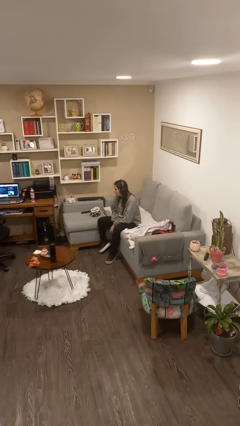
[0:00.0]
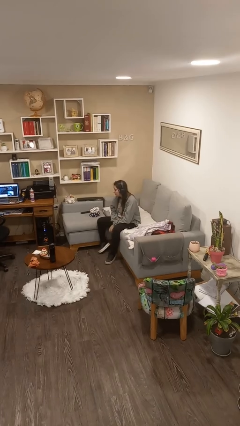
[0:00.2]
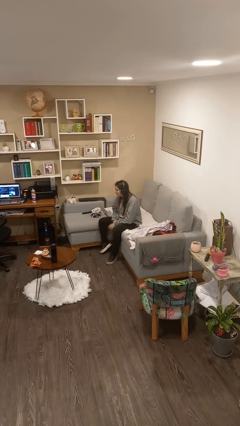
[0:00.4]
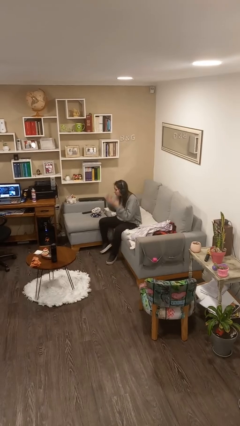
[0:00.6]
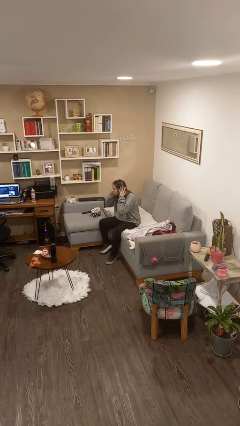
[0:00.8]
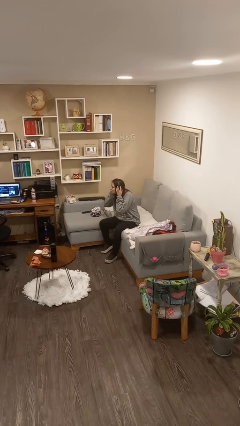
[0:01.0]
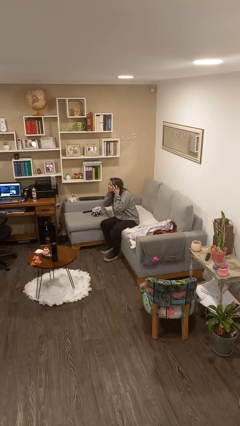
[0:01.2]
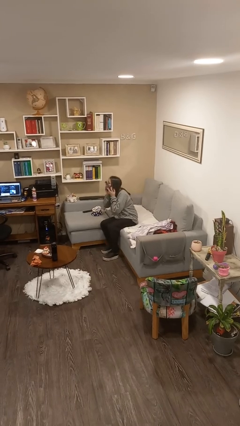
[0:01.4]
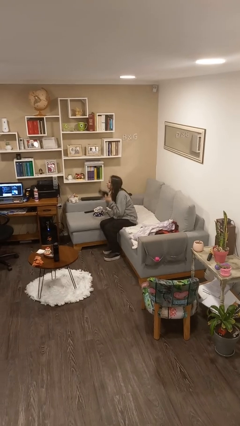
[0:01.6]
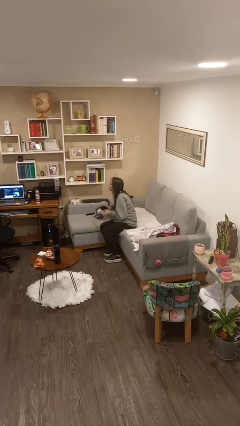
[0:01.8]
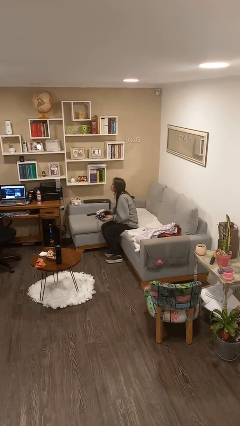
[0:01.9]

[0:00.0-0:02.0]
person takes off headphones

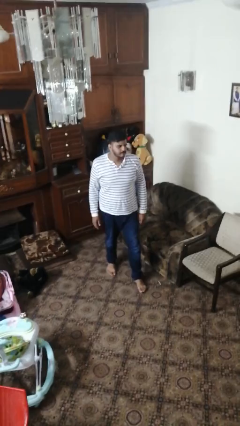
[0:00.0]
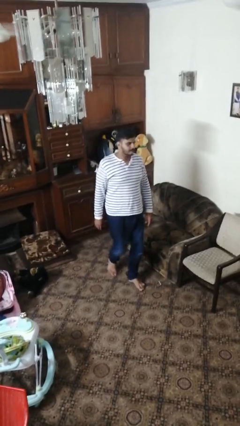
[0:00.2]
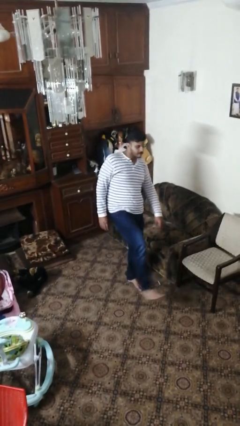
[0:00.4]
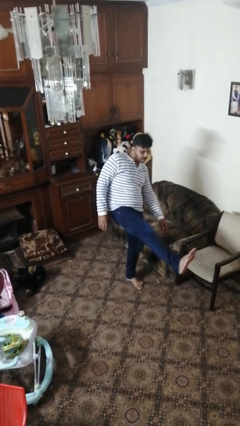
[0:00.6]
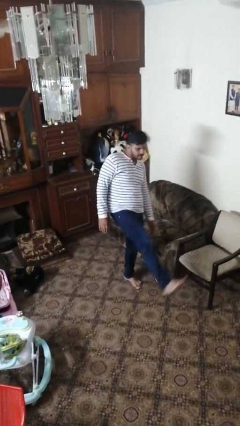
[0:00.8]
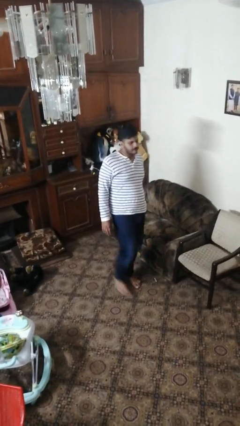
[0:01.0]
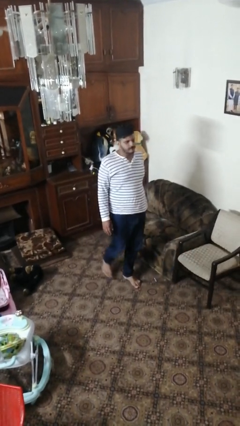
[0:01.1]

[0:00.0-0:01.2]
person karate kicks

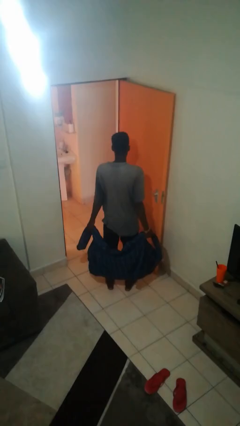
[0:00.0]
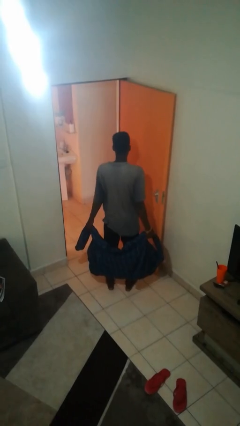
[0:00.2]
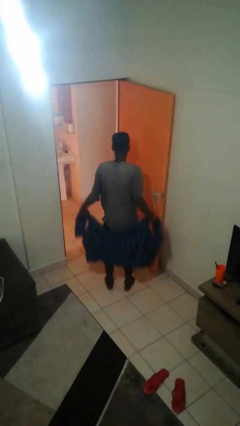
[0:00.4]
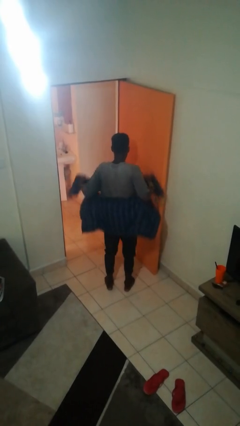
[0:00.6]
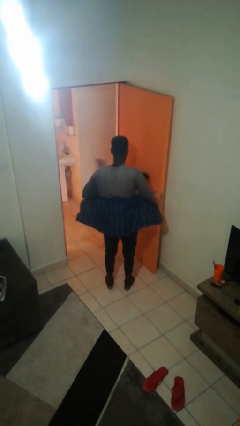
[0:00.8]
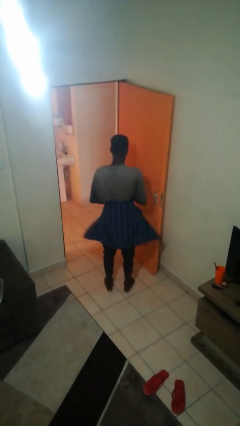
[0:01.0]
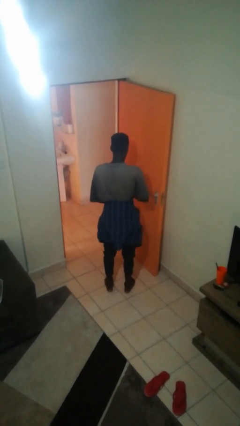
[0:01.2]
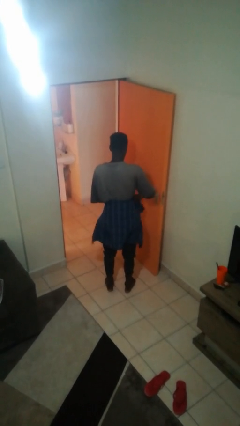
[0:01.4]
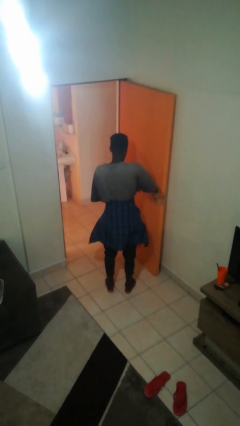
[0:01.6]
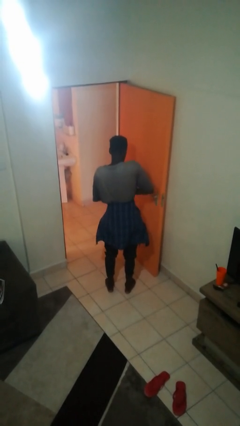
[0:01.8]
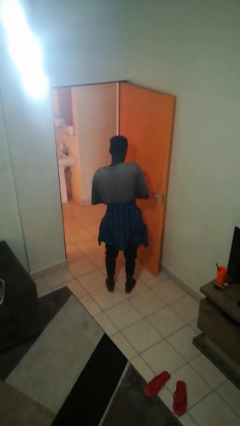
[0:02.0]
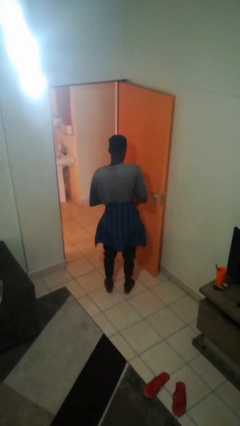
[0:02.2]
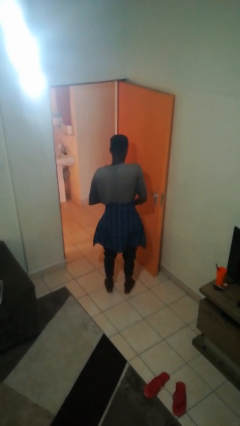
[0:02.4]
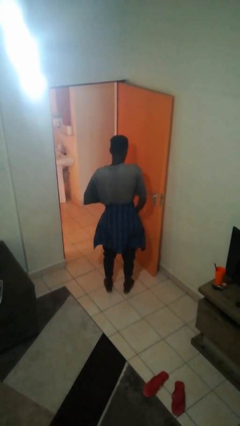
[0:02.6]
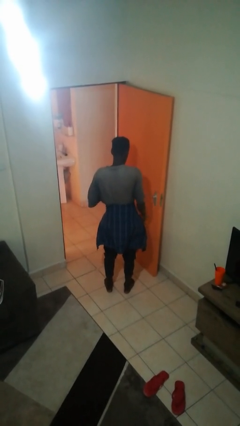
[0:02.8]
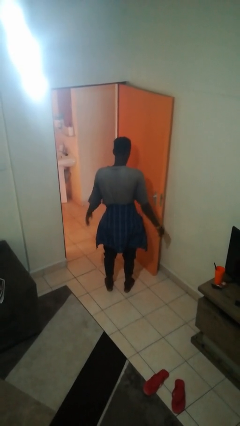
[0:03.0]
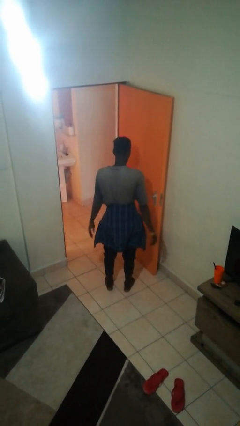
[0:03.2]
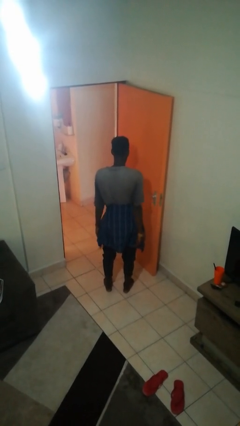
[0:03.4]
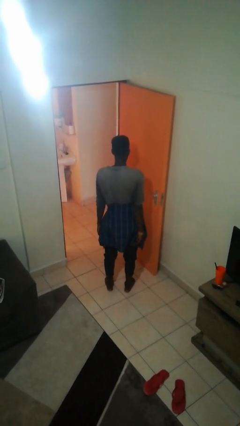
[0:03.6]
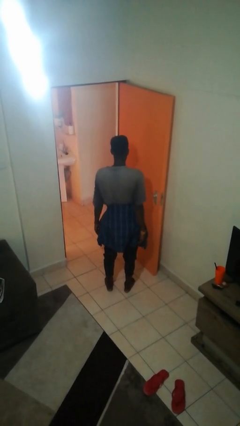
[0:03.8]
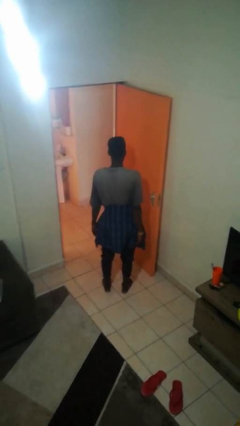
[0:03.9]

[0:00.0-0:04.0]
person ties jacket around waist

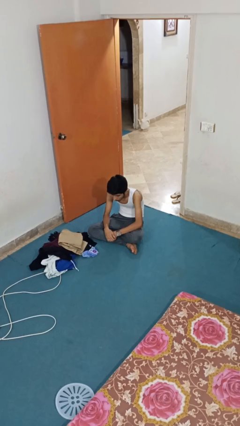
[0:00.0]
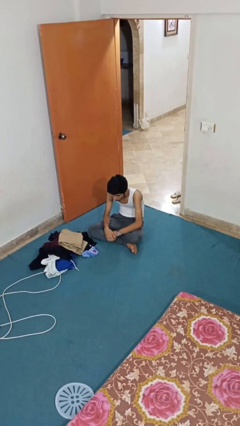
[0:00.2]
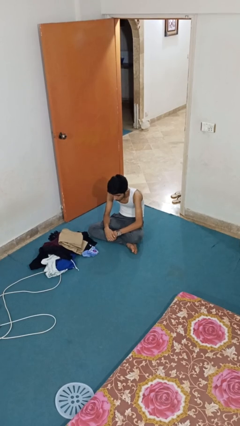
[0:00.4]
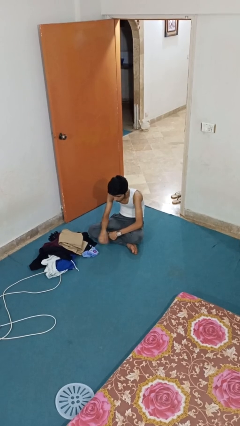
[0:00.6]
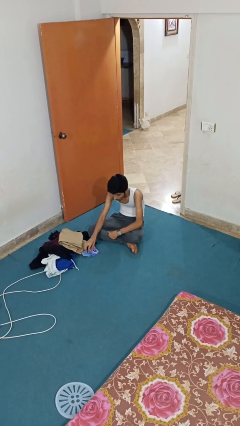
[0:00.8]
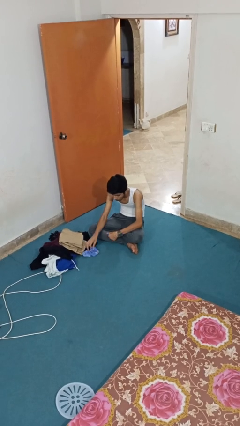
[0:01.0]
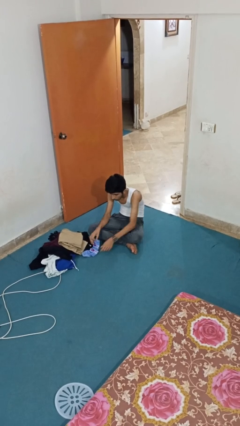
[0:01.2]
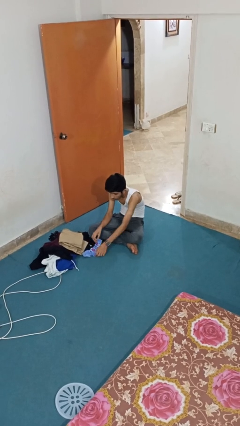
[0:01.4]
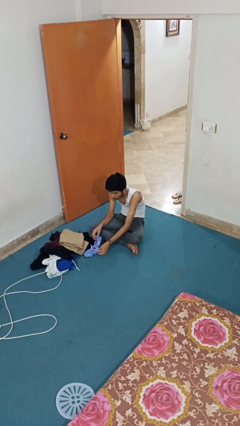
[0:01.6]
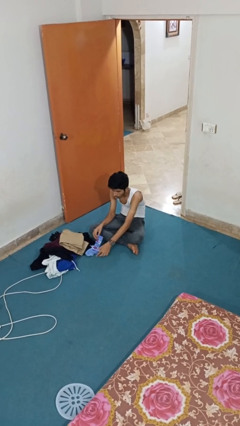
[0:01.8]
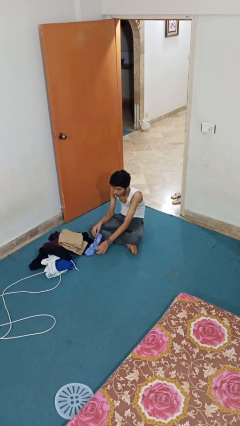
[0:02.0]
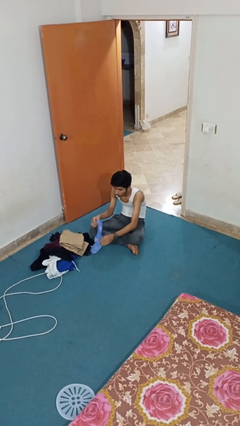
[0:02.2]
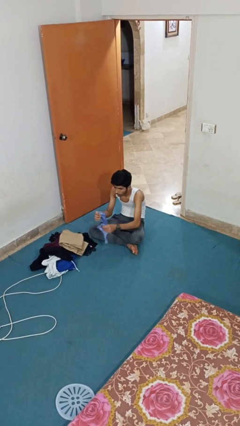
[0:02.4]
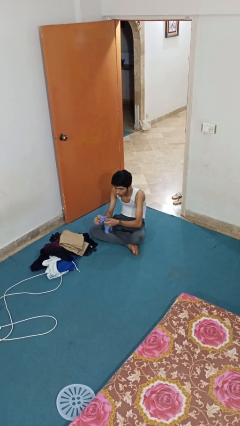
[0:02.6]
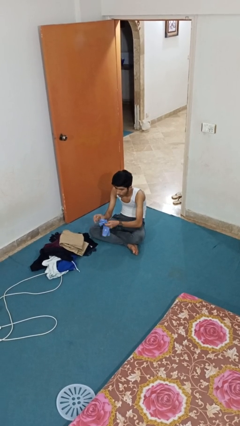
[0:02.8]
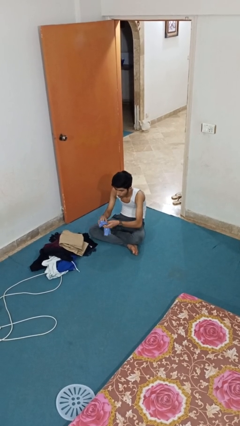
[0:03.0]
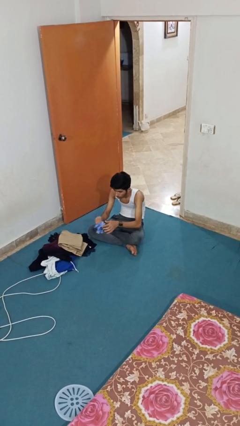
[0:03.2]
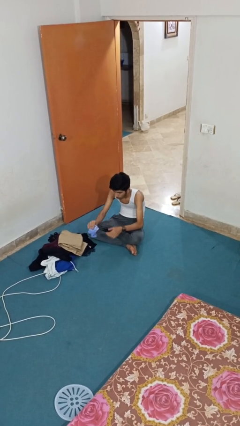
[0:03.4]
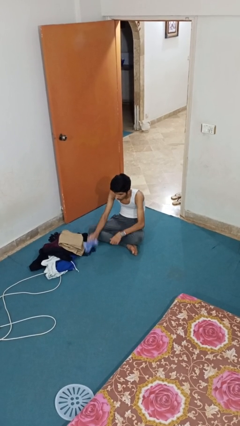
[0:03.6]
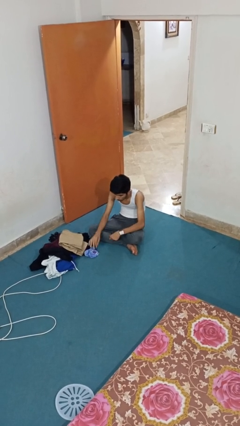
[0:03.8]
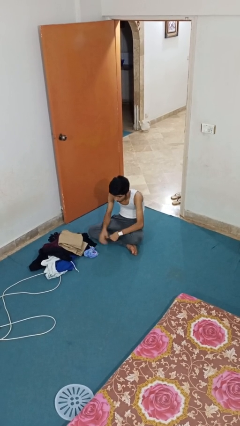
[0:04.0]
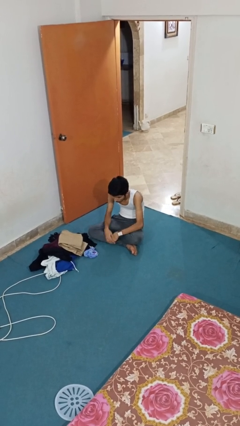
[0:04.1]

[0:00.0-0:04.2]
person folds socks

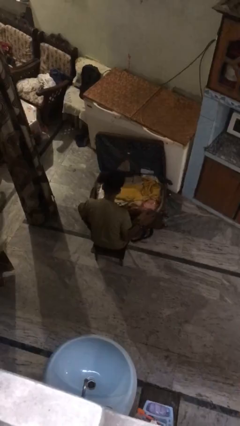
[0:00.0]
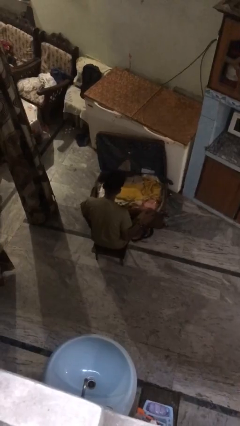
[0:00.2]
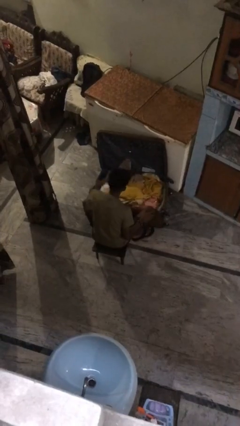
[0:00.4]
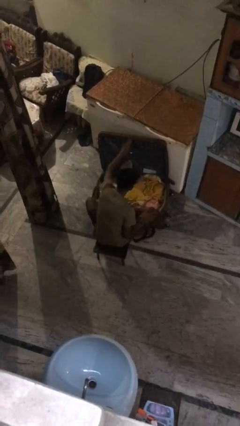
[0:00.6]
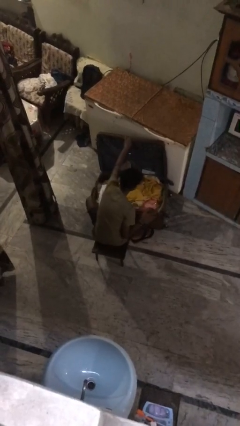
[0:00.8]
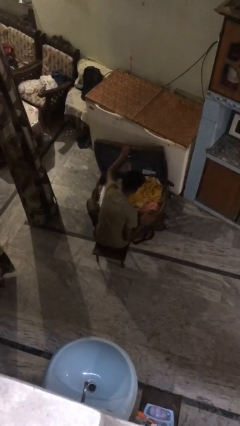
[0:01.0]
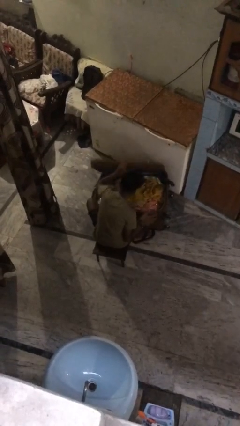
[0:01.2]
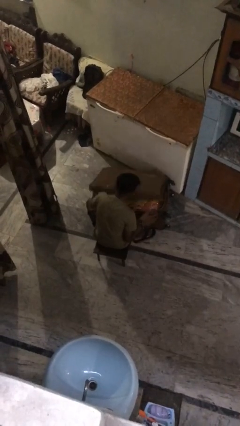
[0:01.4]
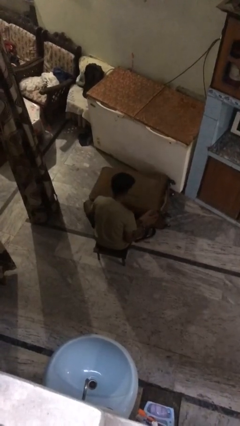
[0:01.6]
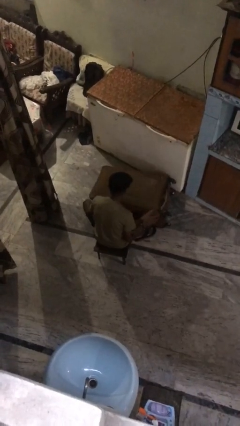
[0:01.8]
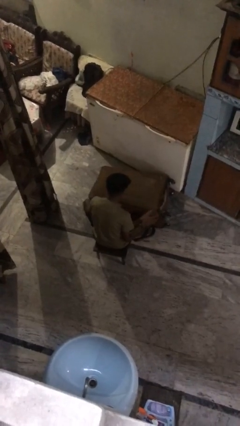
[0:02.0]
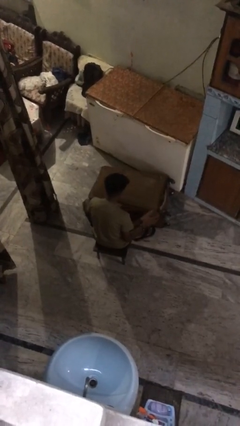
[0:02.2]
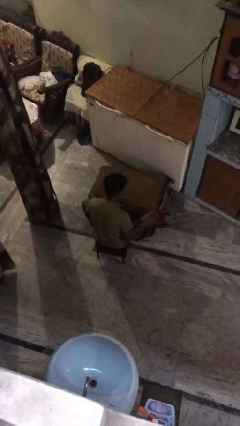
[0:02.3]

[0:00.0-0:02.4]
person closes suitcase

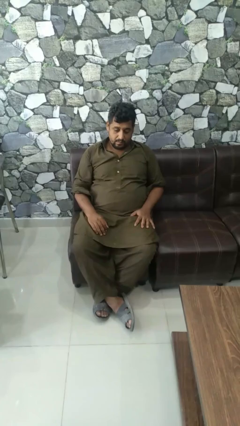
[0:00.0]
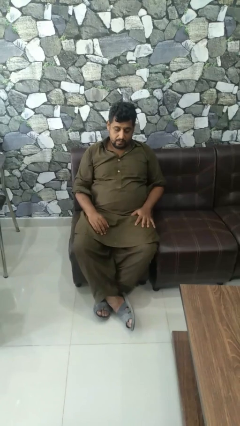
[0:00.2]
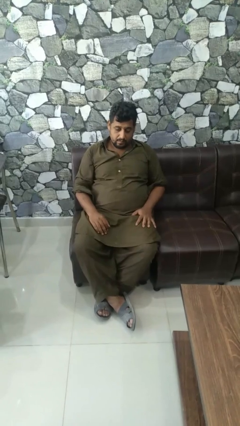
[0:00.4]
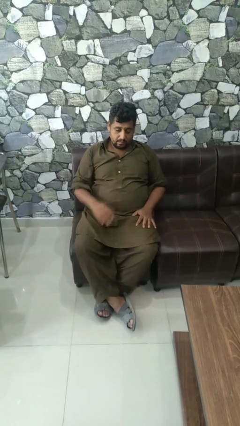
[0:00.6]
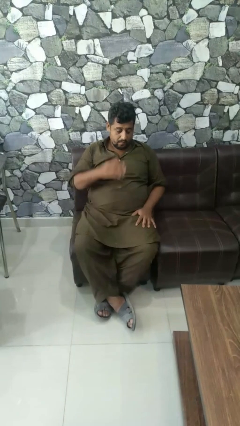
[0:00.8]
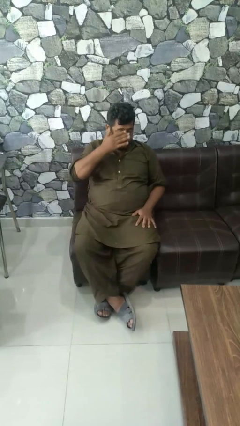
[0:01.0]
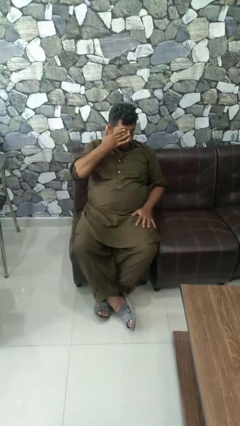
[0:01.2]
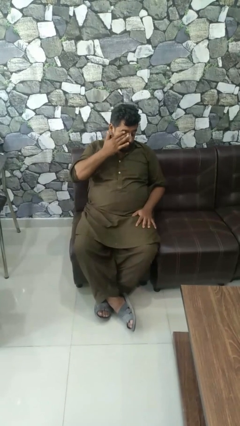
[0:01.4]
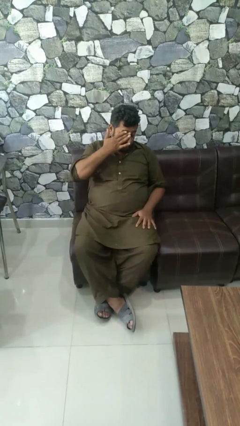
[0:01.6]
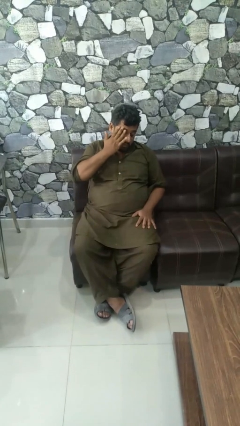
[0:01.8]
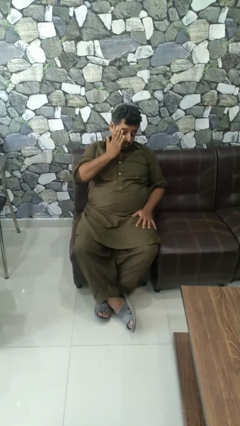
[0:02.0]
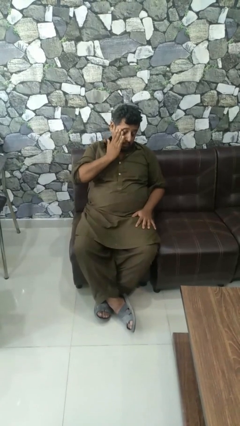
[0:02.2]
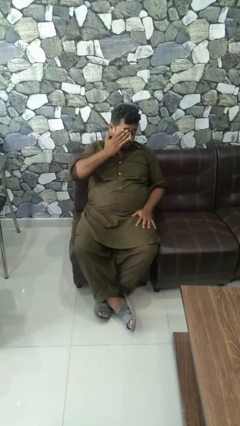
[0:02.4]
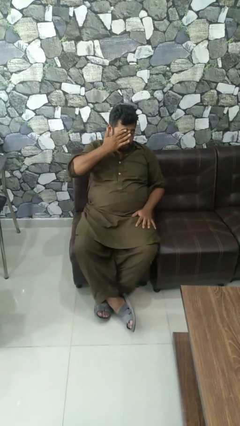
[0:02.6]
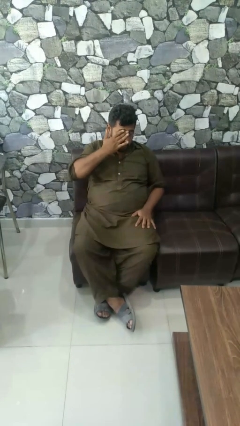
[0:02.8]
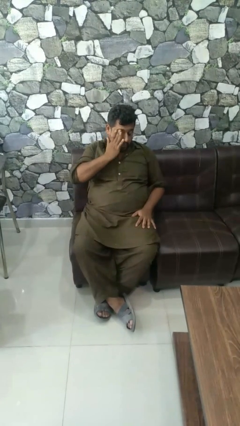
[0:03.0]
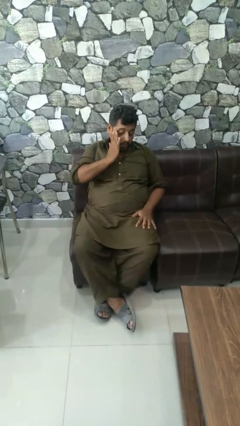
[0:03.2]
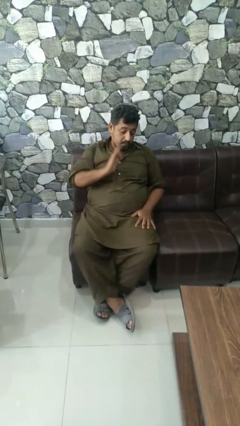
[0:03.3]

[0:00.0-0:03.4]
person rubs eyes

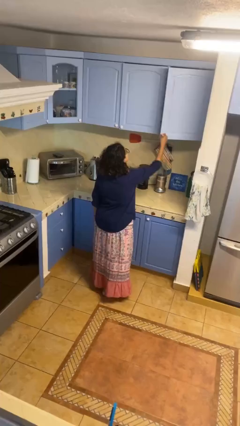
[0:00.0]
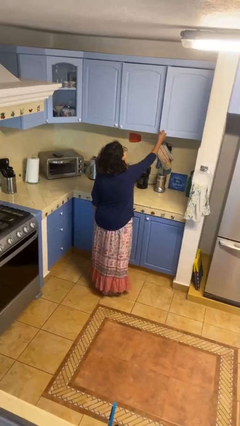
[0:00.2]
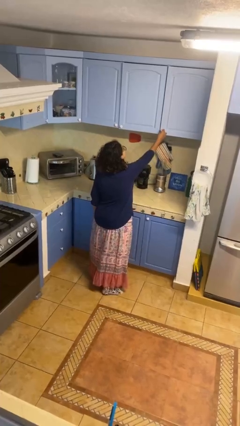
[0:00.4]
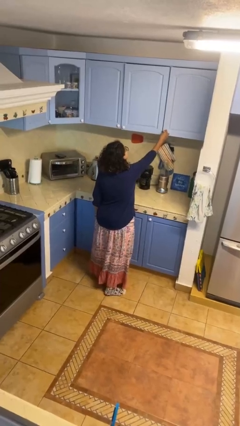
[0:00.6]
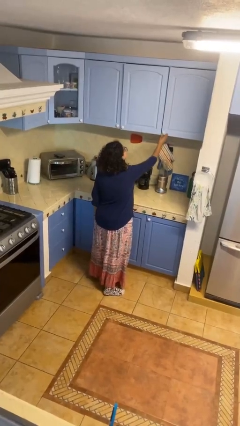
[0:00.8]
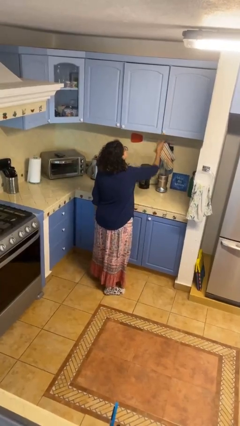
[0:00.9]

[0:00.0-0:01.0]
person closes cabinet
